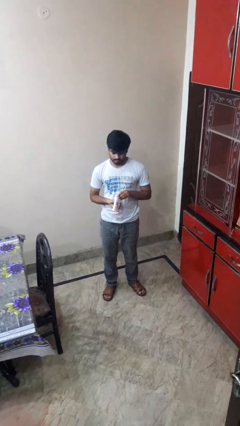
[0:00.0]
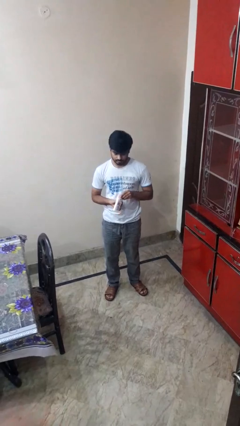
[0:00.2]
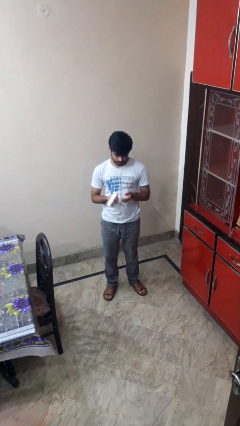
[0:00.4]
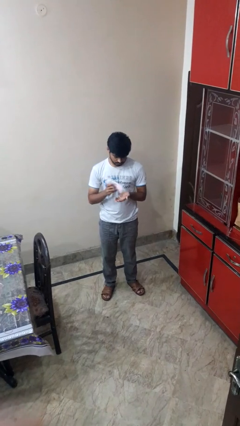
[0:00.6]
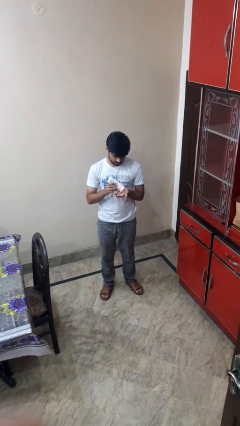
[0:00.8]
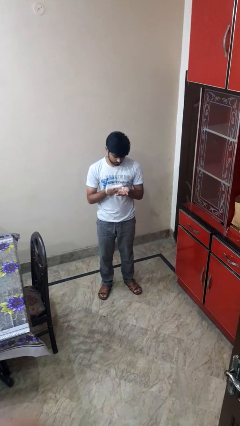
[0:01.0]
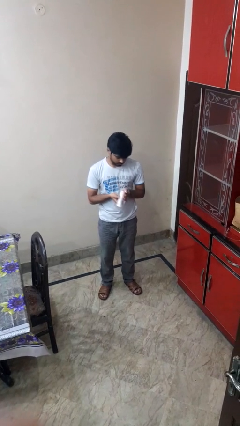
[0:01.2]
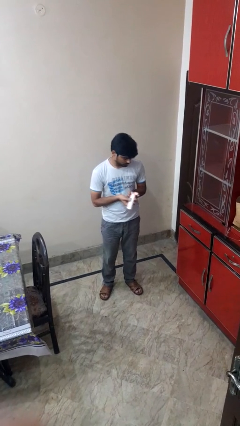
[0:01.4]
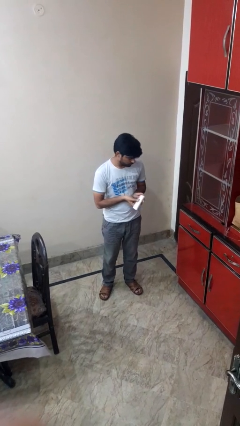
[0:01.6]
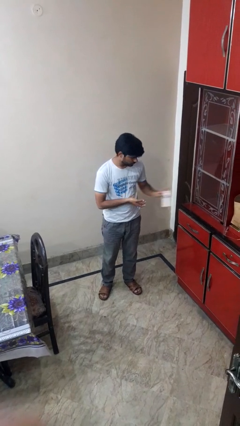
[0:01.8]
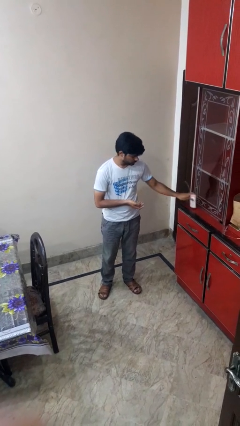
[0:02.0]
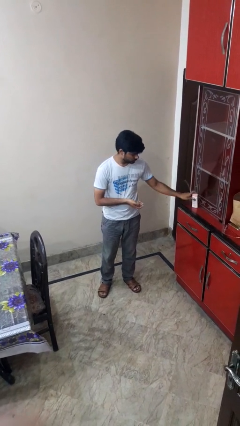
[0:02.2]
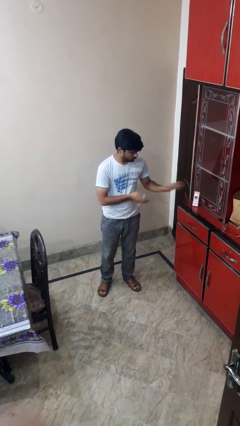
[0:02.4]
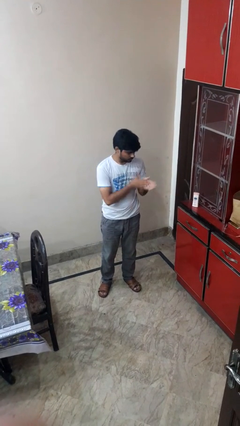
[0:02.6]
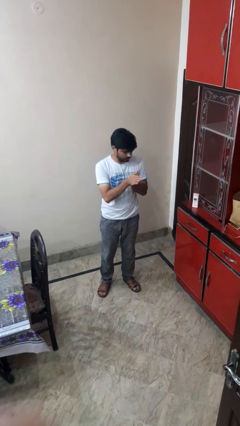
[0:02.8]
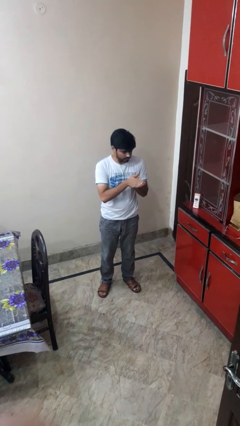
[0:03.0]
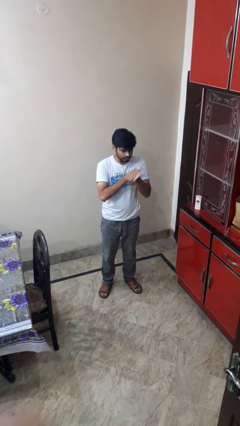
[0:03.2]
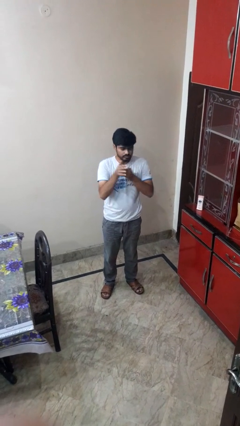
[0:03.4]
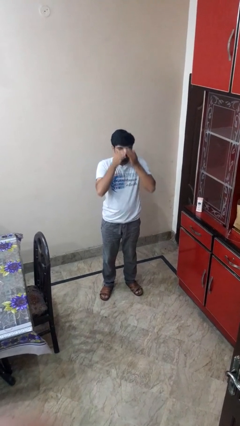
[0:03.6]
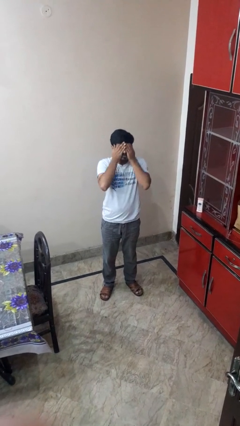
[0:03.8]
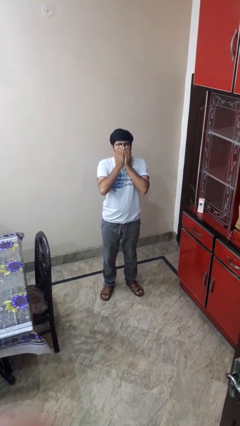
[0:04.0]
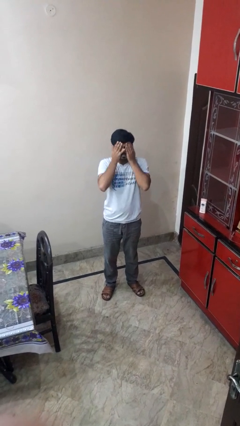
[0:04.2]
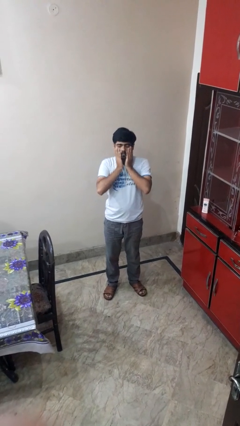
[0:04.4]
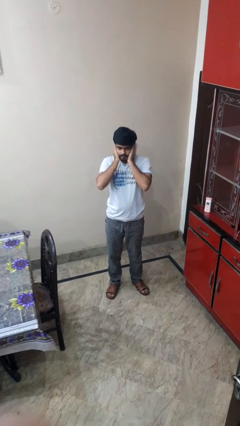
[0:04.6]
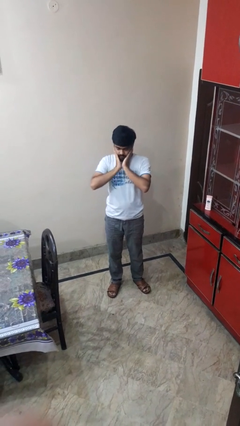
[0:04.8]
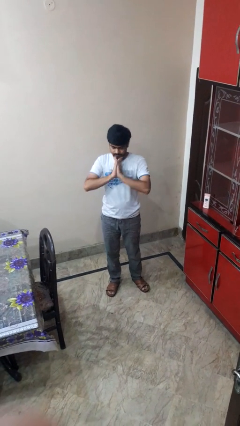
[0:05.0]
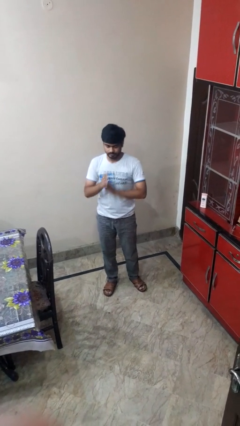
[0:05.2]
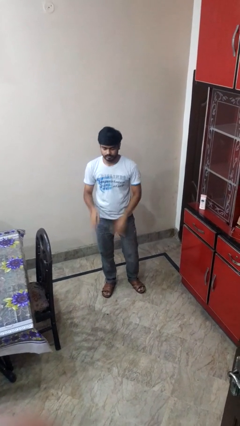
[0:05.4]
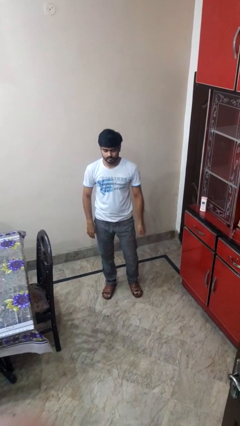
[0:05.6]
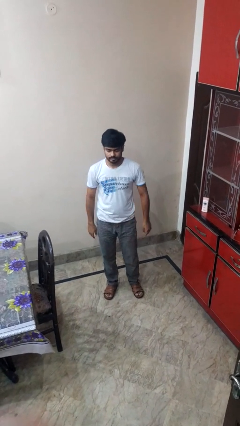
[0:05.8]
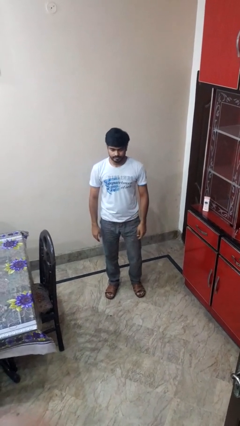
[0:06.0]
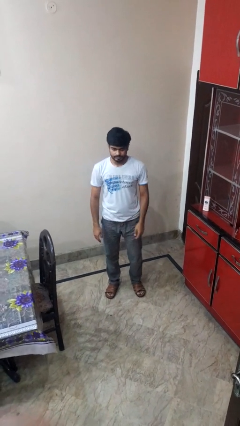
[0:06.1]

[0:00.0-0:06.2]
person applies facial moisturizer

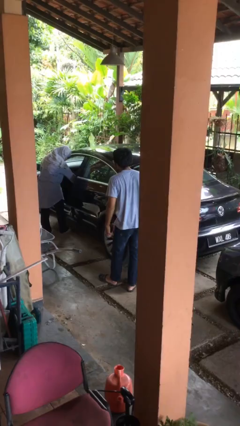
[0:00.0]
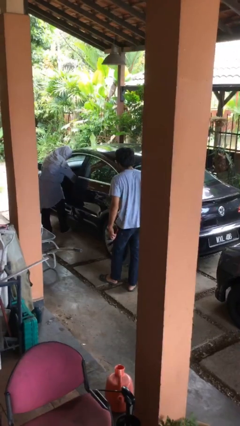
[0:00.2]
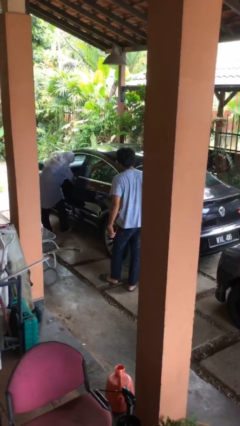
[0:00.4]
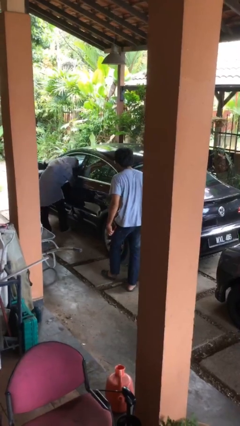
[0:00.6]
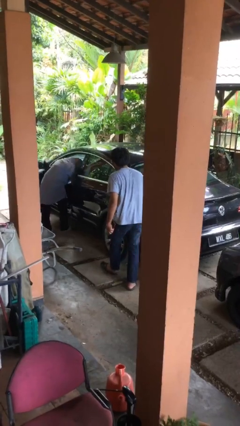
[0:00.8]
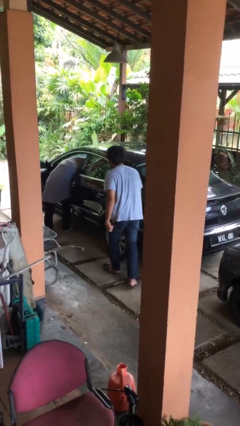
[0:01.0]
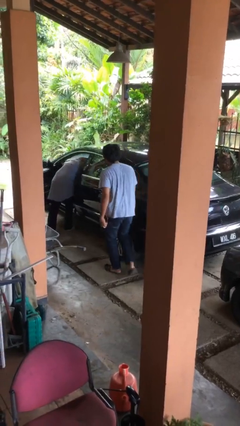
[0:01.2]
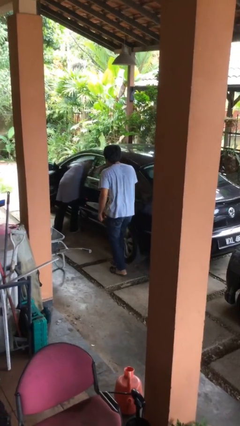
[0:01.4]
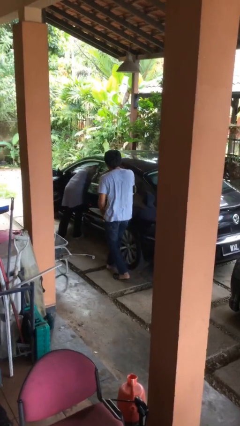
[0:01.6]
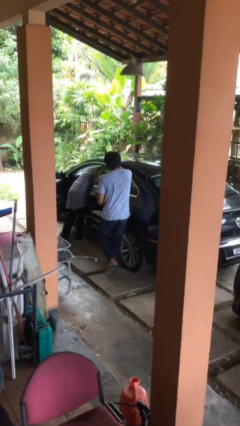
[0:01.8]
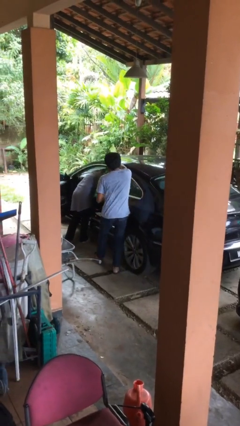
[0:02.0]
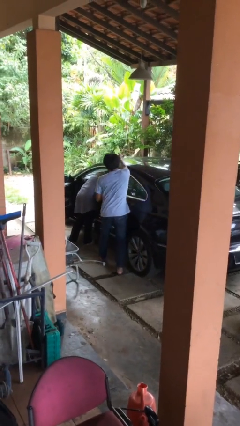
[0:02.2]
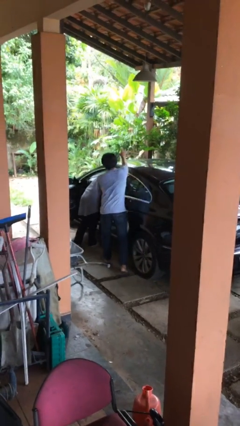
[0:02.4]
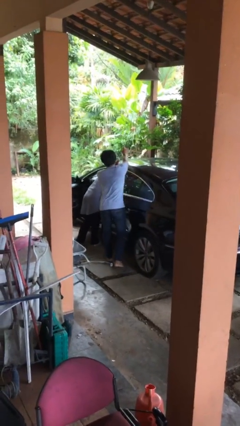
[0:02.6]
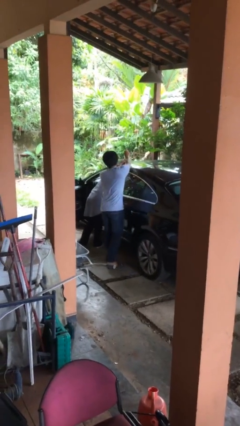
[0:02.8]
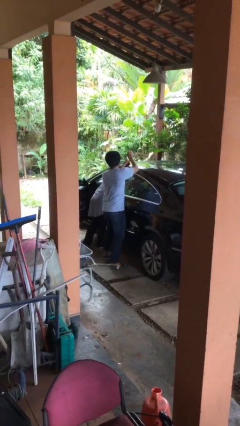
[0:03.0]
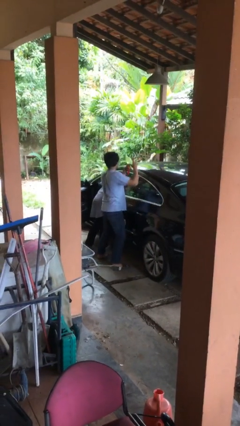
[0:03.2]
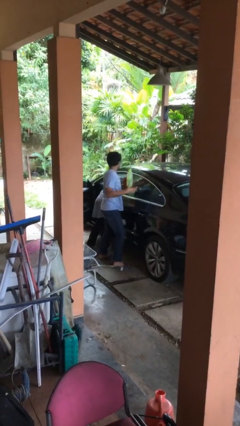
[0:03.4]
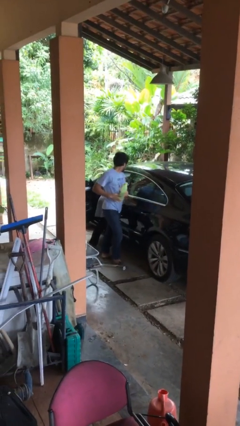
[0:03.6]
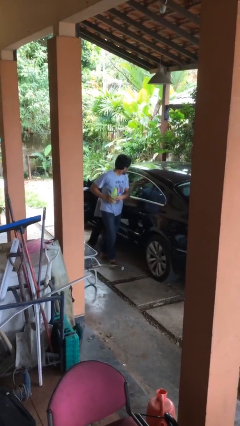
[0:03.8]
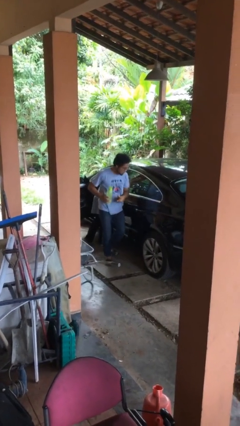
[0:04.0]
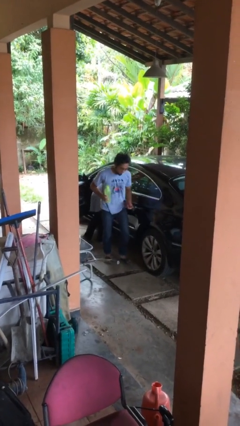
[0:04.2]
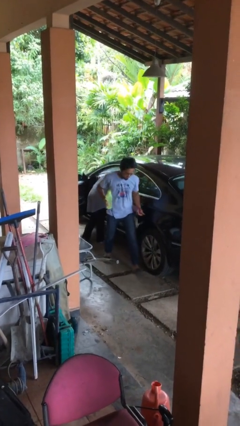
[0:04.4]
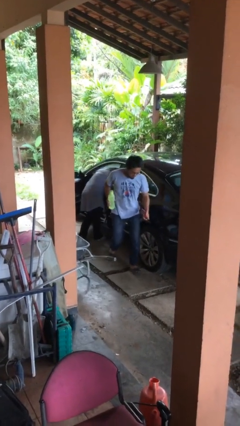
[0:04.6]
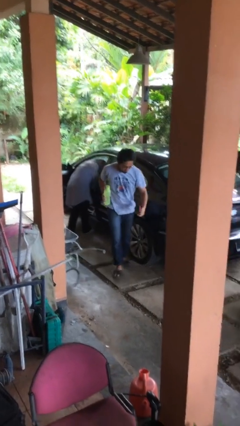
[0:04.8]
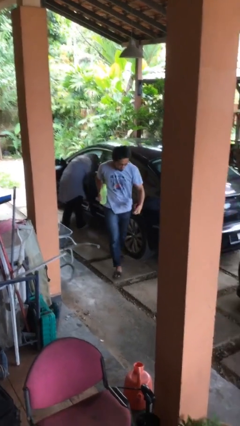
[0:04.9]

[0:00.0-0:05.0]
person steals object from person

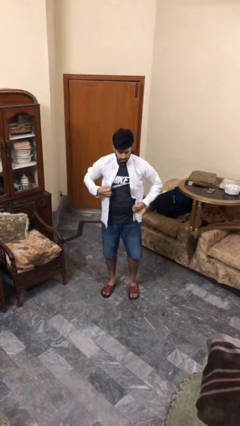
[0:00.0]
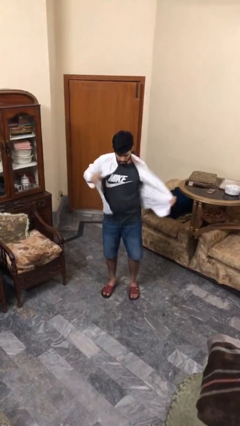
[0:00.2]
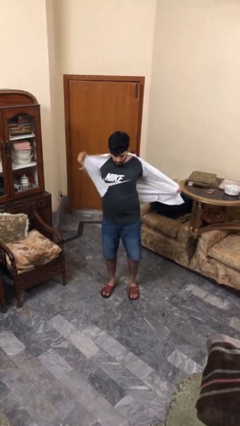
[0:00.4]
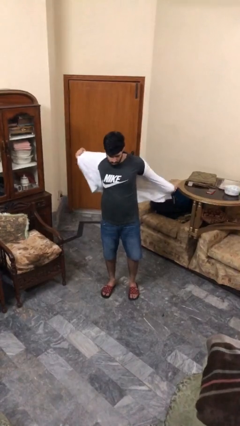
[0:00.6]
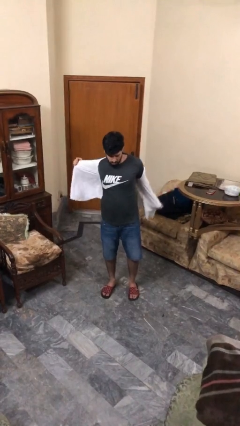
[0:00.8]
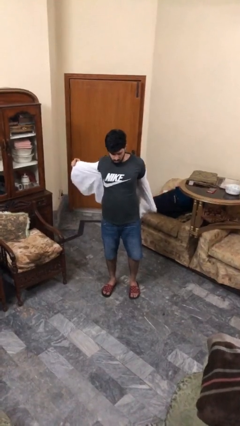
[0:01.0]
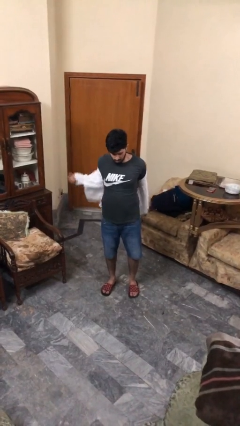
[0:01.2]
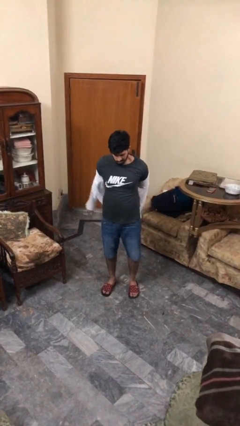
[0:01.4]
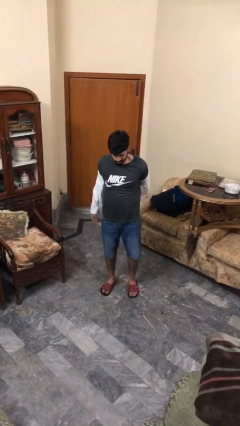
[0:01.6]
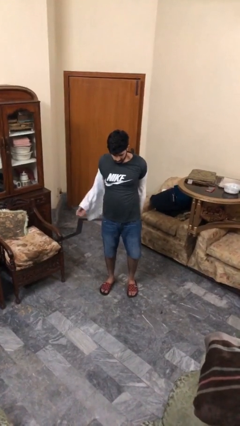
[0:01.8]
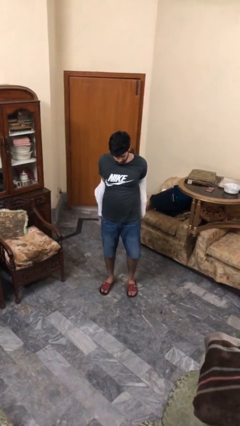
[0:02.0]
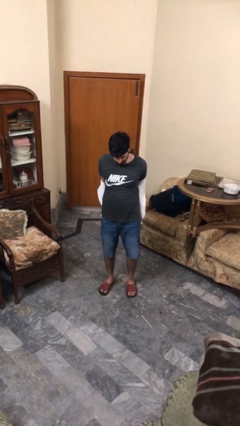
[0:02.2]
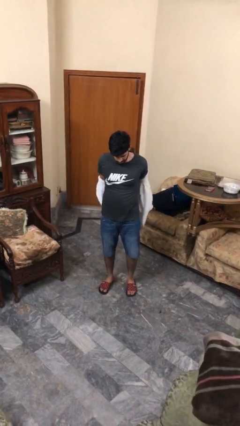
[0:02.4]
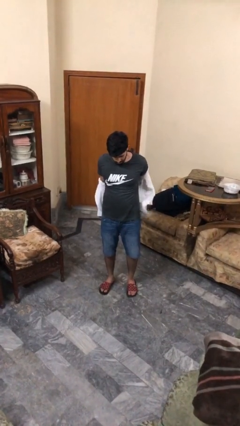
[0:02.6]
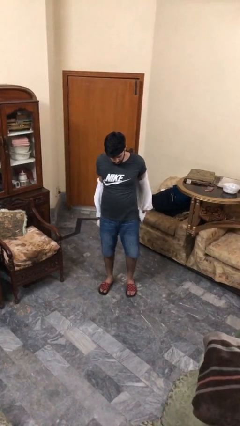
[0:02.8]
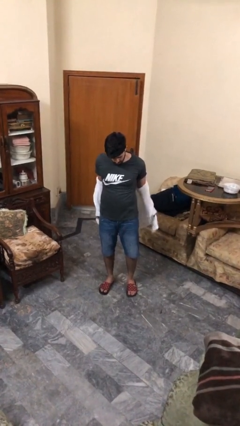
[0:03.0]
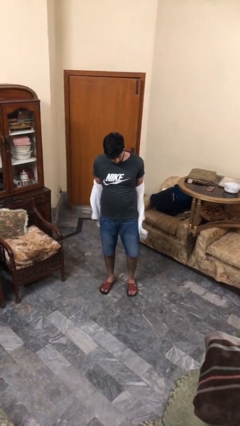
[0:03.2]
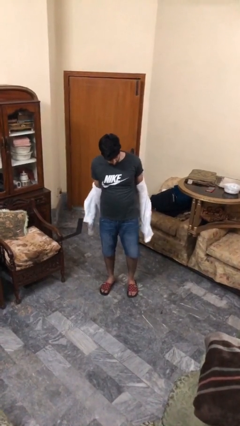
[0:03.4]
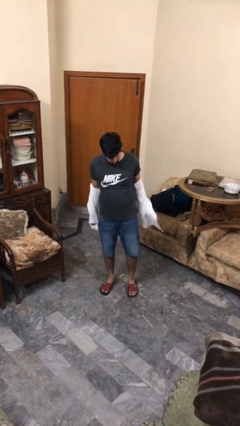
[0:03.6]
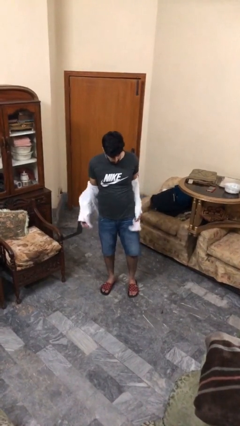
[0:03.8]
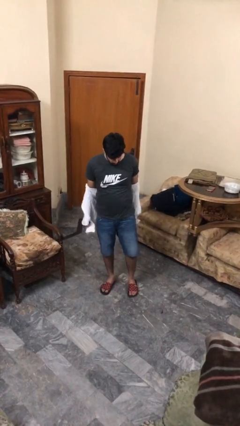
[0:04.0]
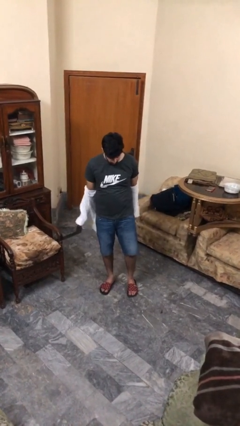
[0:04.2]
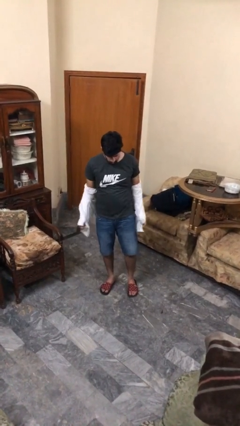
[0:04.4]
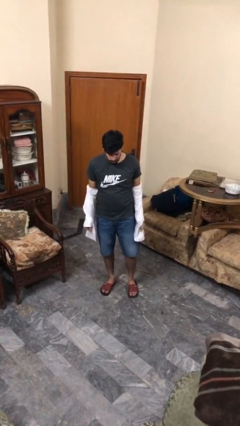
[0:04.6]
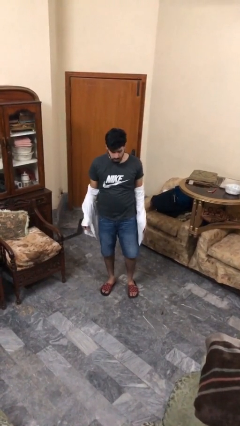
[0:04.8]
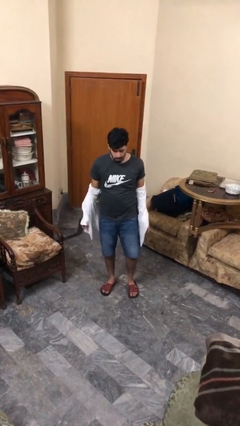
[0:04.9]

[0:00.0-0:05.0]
person takes off shirt

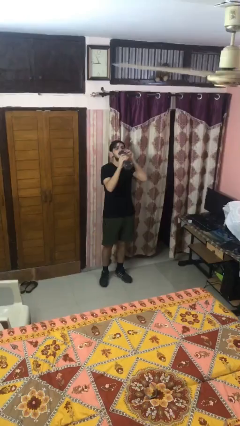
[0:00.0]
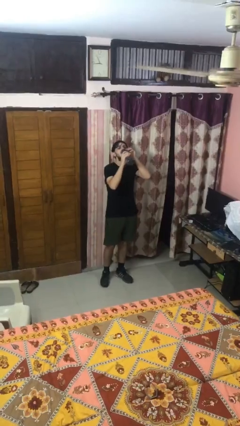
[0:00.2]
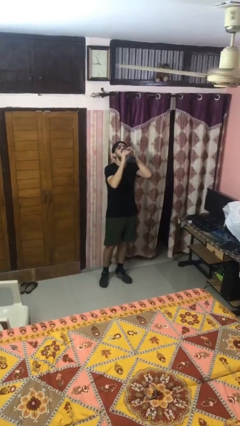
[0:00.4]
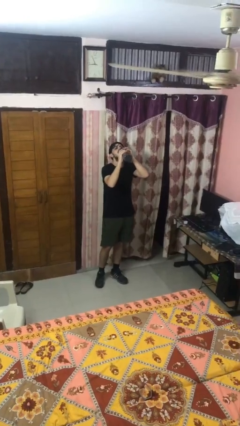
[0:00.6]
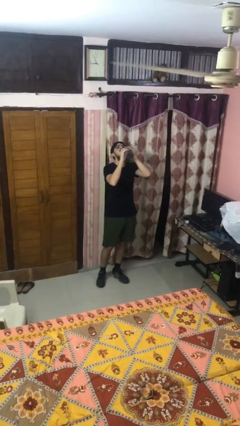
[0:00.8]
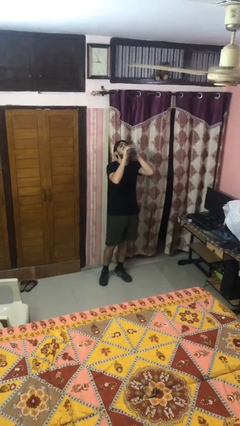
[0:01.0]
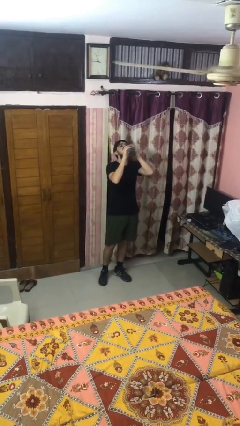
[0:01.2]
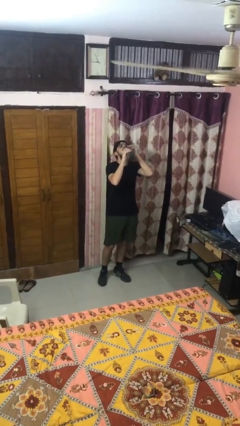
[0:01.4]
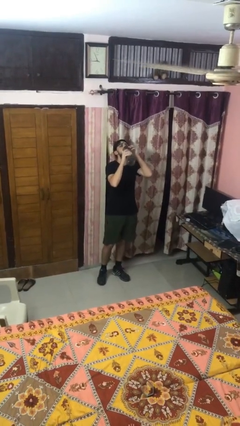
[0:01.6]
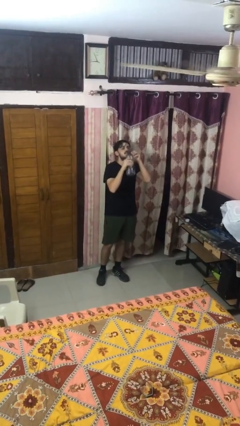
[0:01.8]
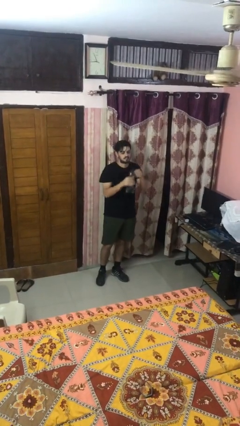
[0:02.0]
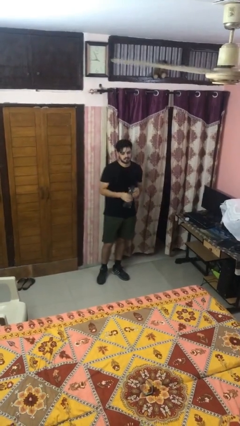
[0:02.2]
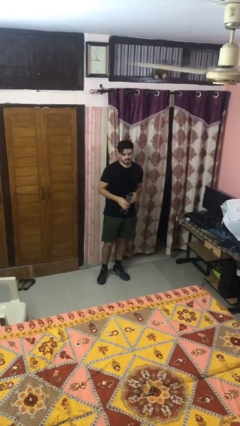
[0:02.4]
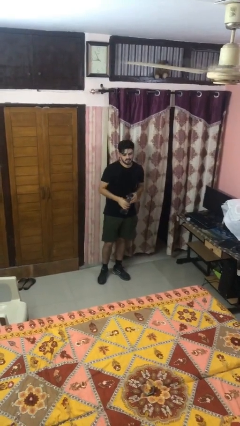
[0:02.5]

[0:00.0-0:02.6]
person drinks from bottle
